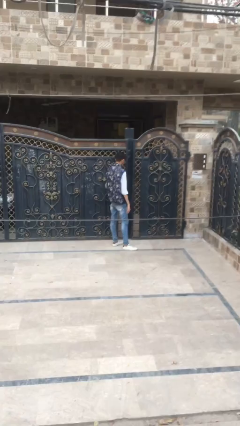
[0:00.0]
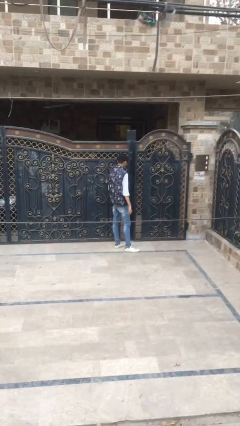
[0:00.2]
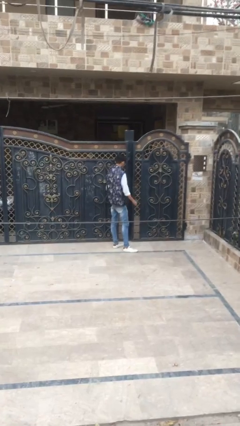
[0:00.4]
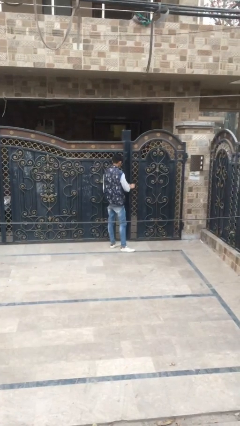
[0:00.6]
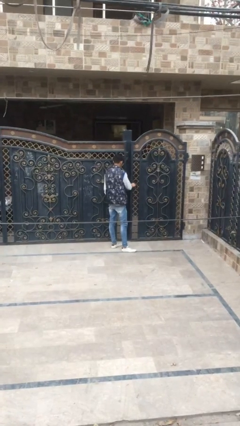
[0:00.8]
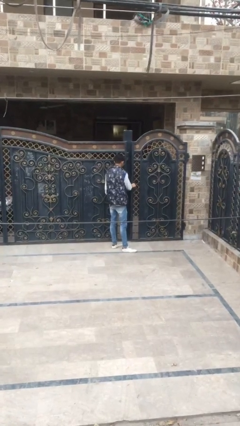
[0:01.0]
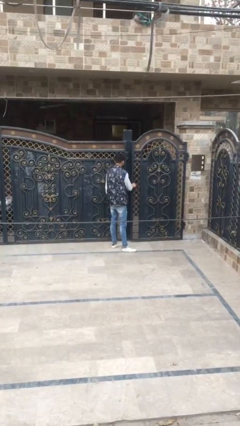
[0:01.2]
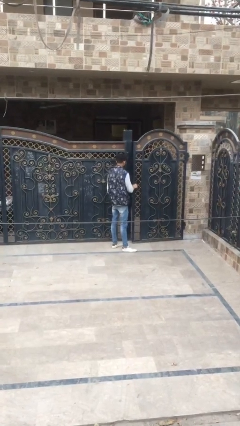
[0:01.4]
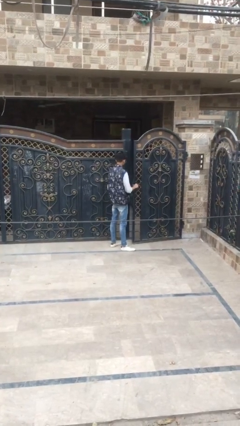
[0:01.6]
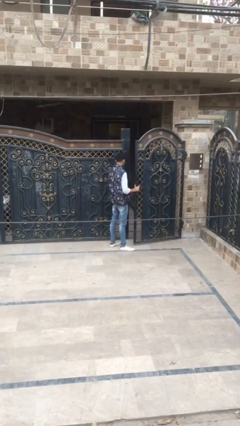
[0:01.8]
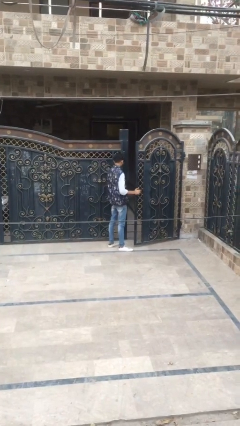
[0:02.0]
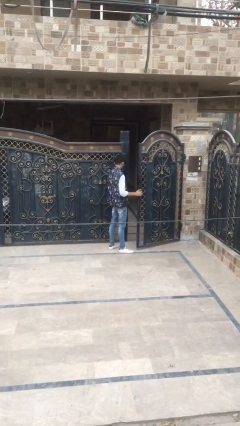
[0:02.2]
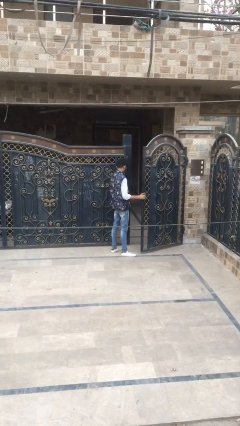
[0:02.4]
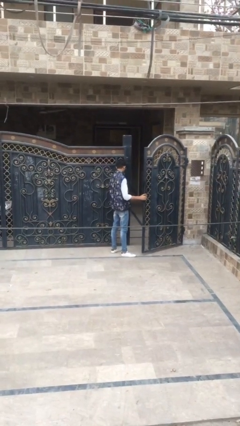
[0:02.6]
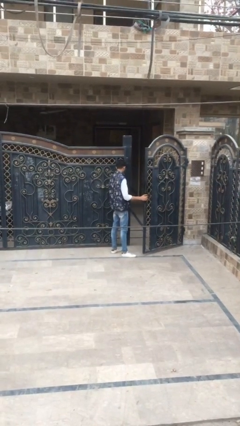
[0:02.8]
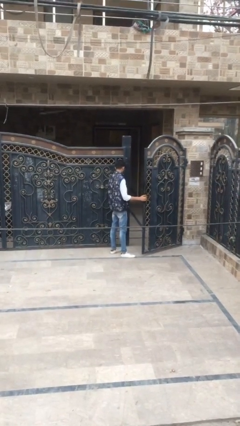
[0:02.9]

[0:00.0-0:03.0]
person opens facility door

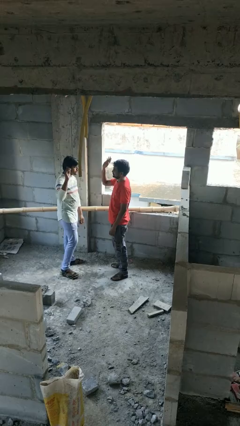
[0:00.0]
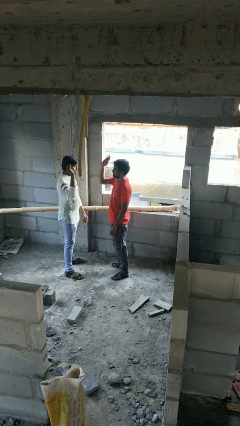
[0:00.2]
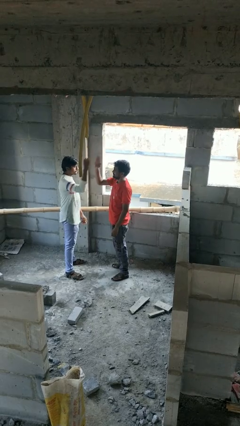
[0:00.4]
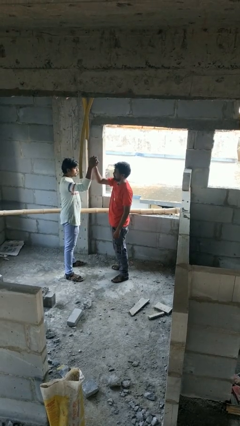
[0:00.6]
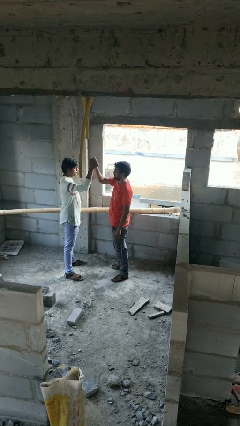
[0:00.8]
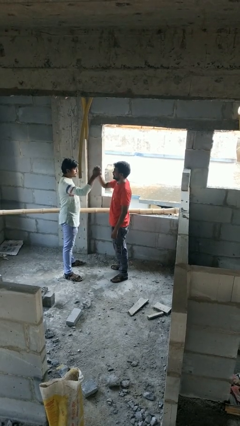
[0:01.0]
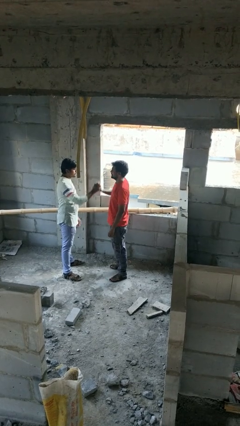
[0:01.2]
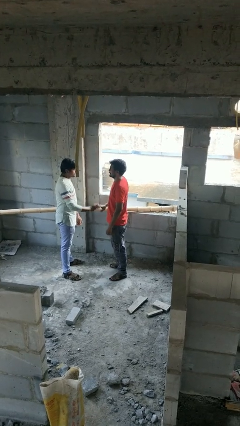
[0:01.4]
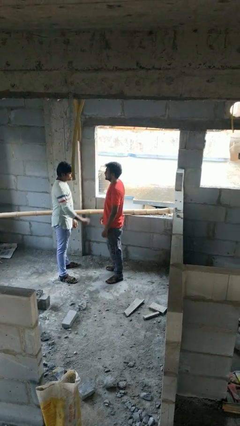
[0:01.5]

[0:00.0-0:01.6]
person highfives hand

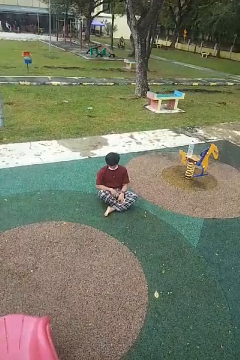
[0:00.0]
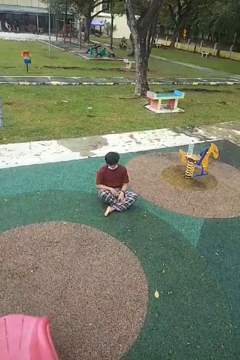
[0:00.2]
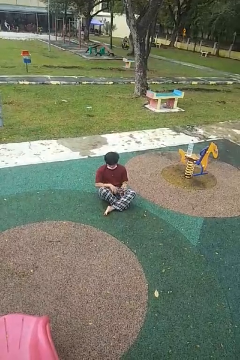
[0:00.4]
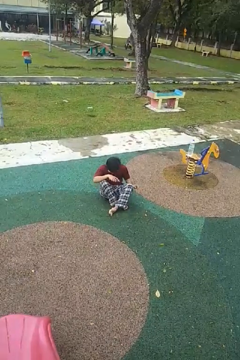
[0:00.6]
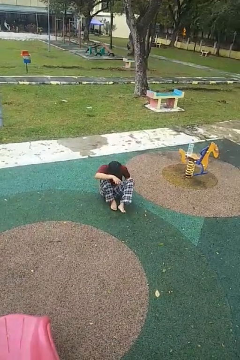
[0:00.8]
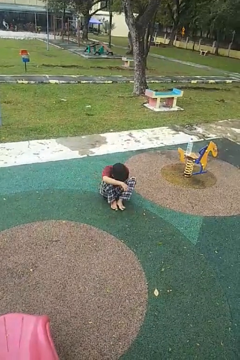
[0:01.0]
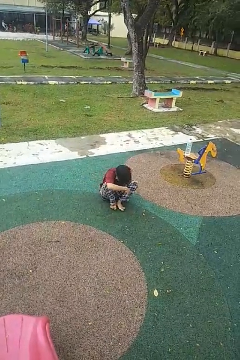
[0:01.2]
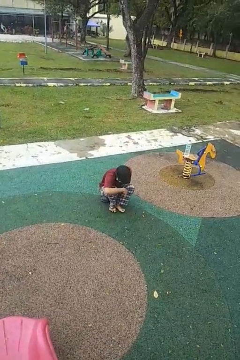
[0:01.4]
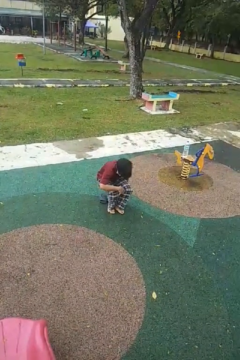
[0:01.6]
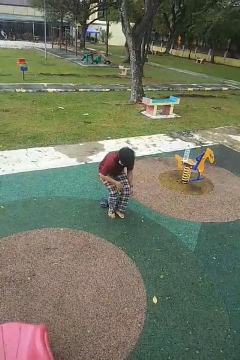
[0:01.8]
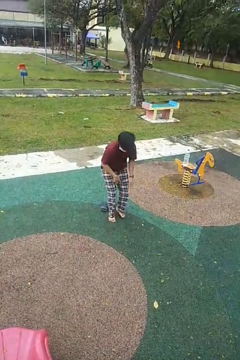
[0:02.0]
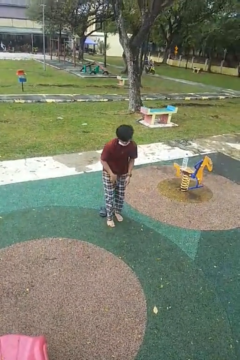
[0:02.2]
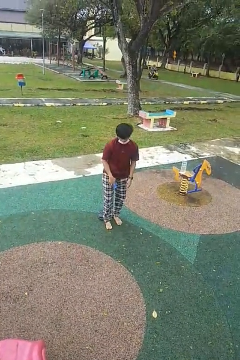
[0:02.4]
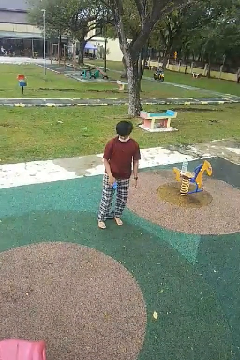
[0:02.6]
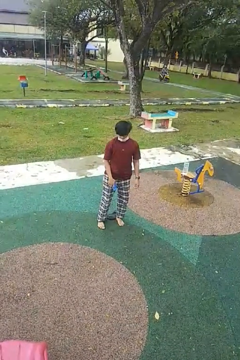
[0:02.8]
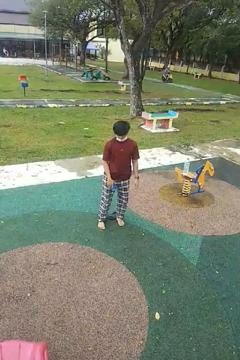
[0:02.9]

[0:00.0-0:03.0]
person stands up from floor

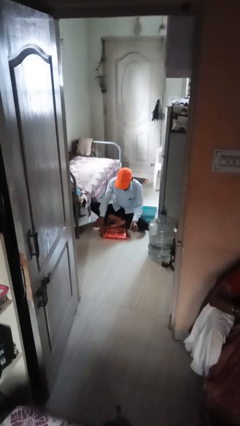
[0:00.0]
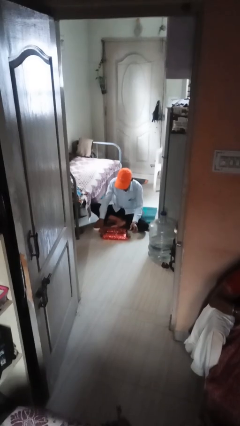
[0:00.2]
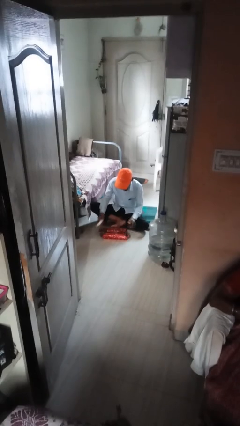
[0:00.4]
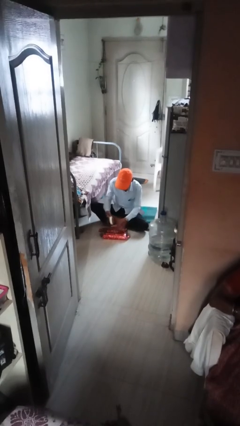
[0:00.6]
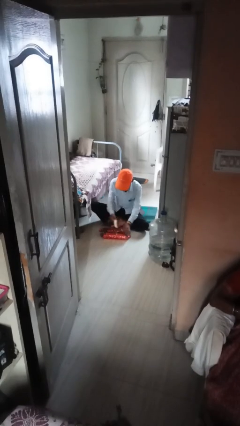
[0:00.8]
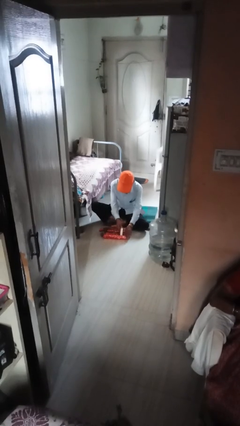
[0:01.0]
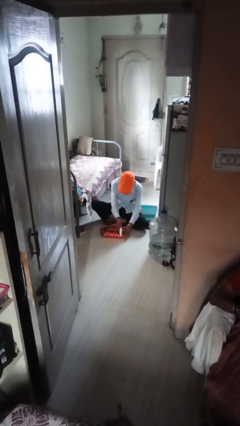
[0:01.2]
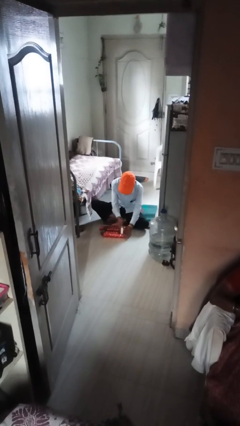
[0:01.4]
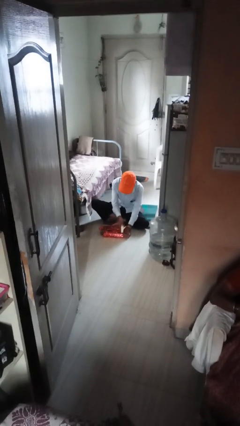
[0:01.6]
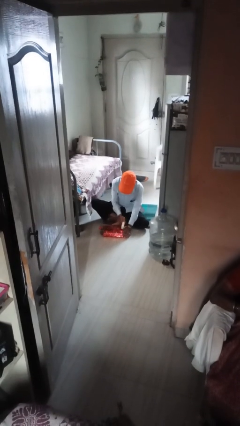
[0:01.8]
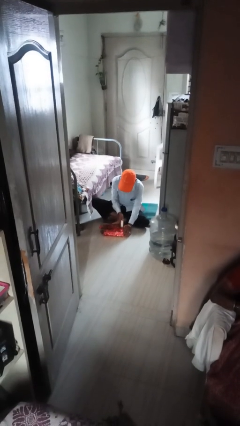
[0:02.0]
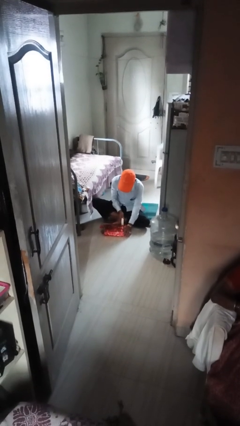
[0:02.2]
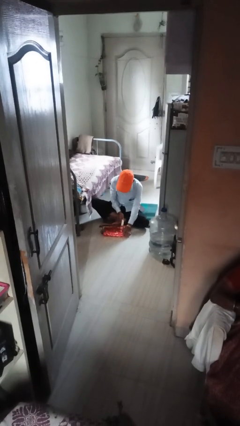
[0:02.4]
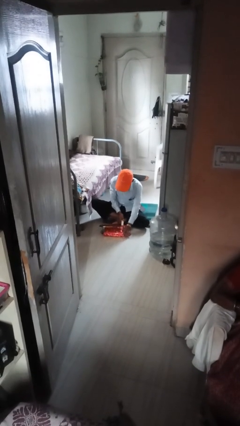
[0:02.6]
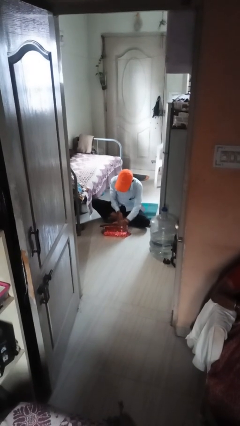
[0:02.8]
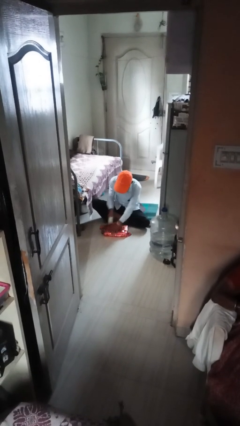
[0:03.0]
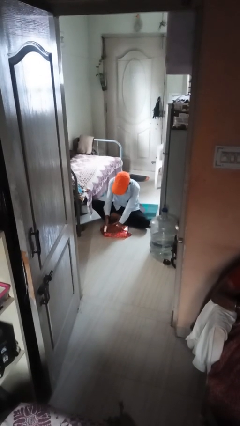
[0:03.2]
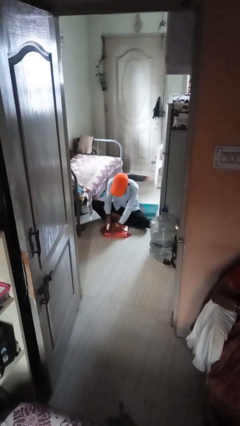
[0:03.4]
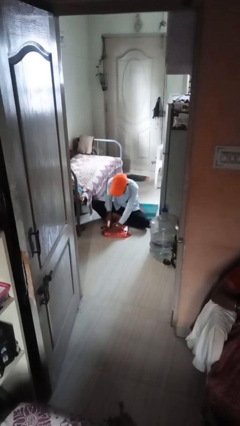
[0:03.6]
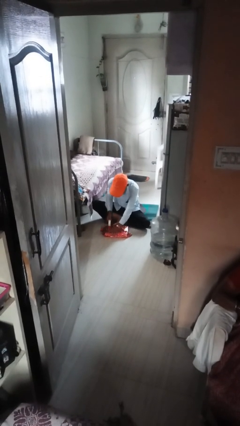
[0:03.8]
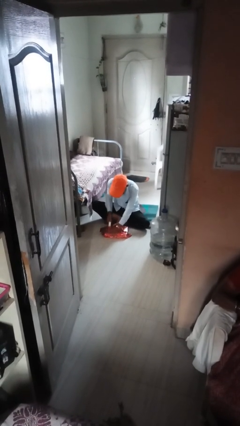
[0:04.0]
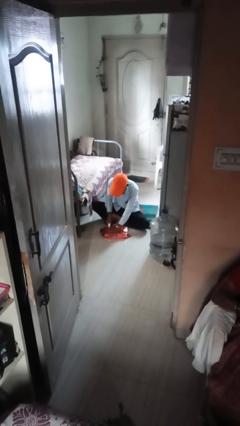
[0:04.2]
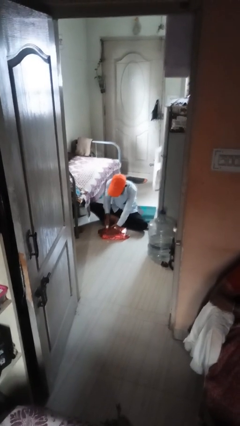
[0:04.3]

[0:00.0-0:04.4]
person wraps box

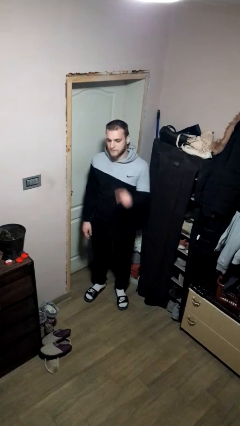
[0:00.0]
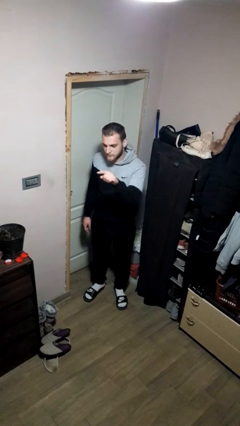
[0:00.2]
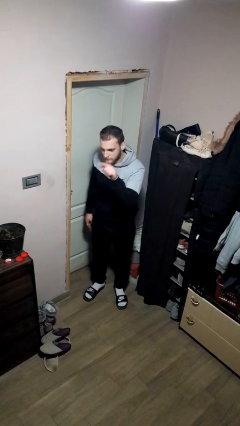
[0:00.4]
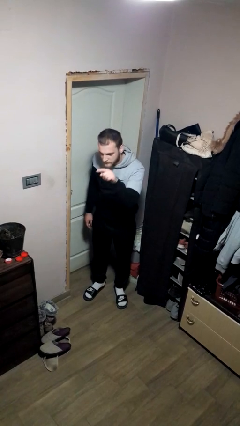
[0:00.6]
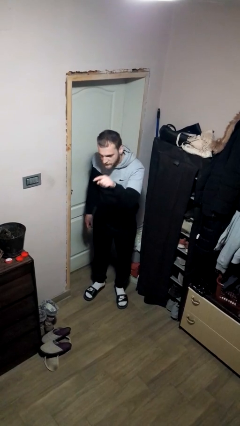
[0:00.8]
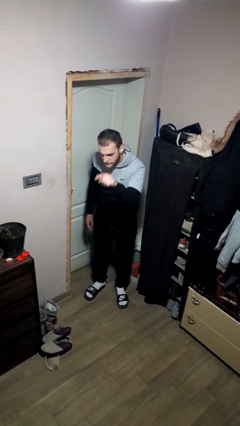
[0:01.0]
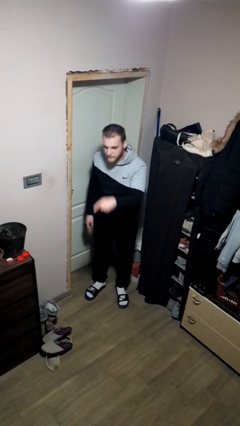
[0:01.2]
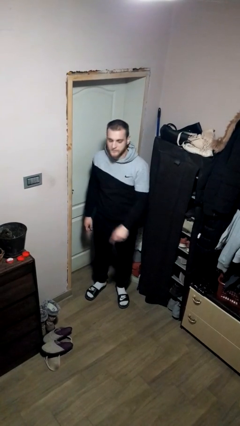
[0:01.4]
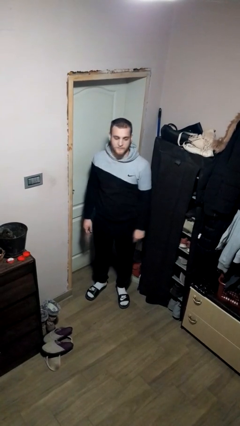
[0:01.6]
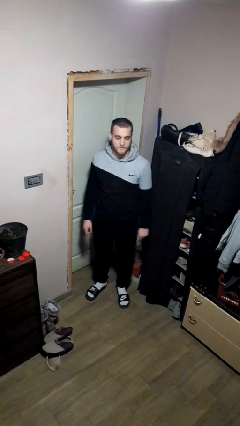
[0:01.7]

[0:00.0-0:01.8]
person points at person

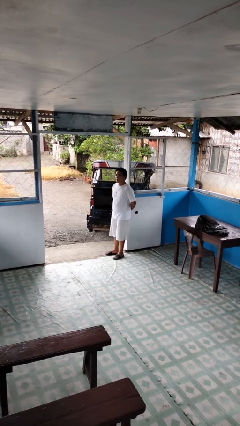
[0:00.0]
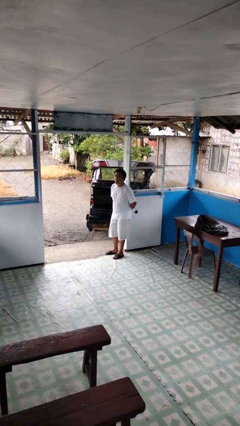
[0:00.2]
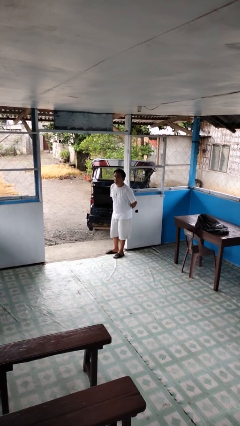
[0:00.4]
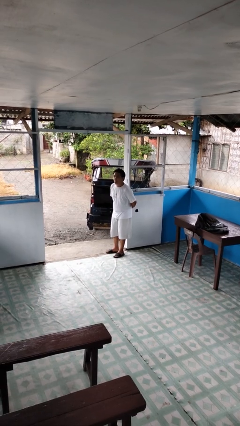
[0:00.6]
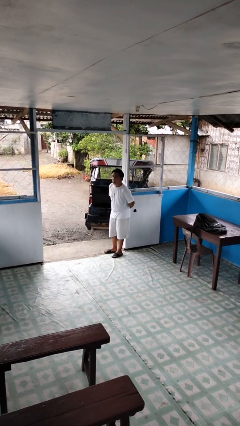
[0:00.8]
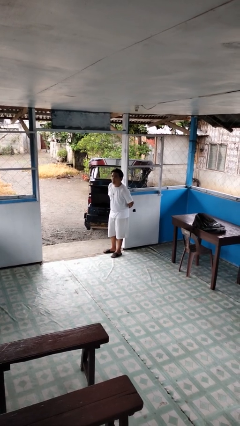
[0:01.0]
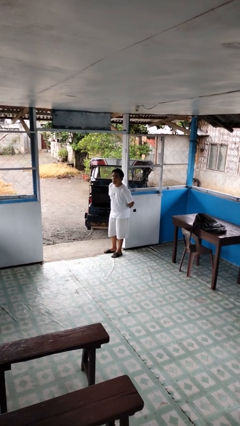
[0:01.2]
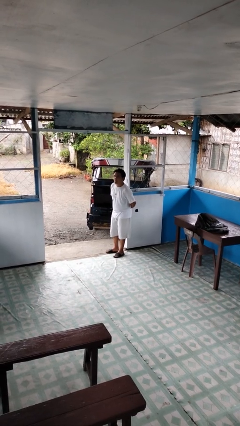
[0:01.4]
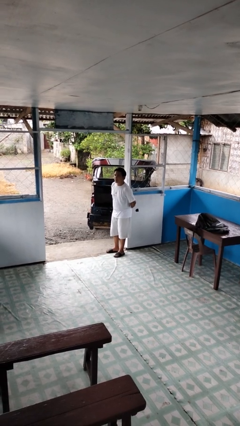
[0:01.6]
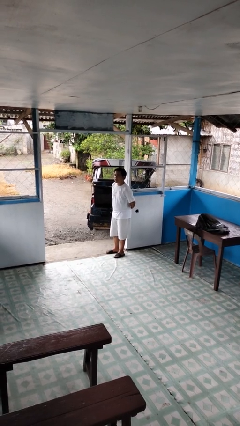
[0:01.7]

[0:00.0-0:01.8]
person sticks out tongue

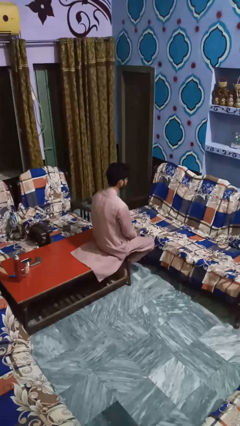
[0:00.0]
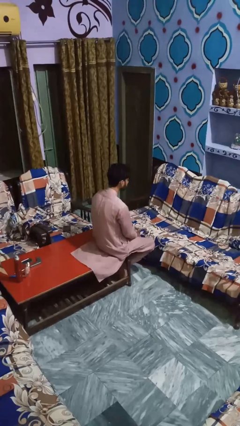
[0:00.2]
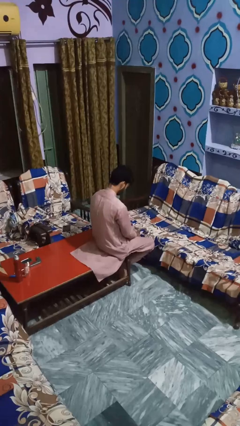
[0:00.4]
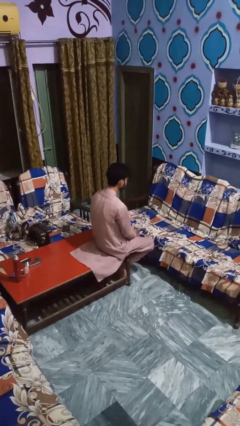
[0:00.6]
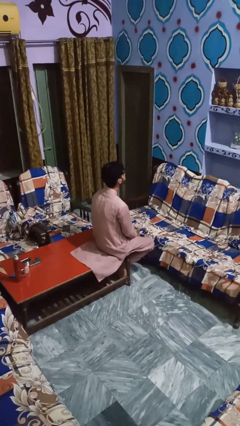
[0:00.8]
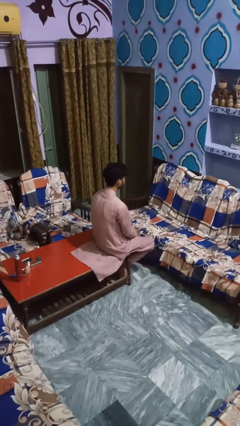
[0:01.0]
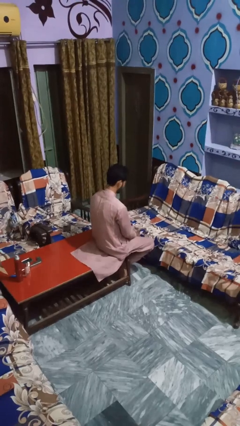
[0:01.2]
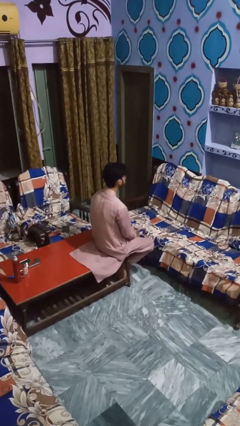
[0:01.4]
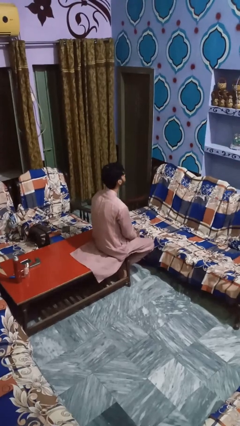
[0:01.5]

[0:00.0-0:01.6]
person nods head
